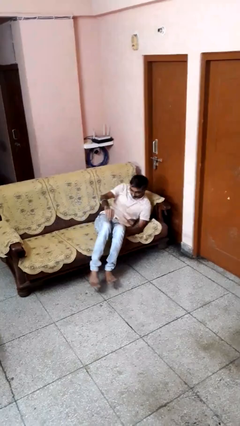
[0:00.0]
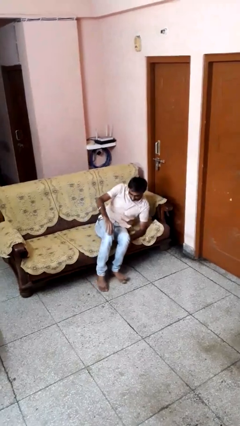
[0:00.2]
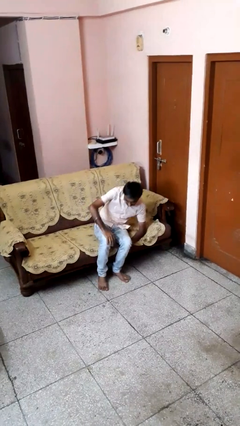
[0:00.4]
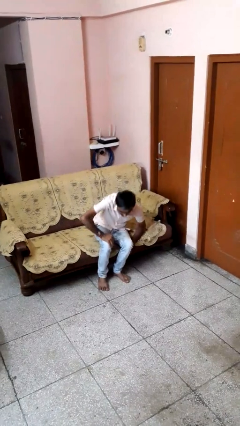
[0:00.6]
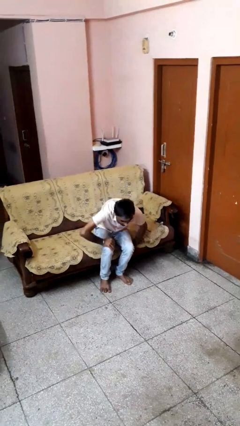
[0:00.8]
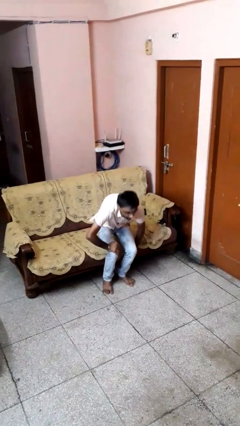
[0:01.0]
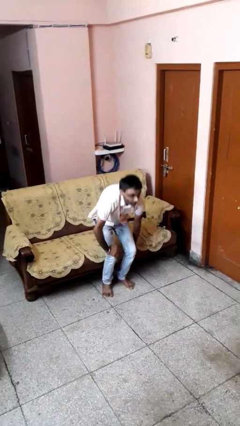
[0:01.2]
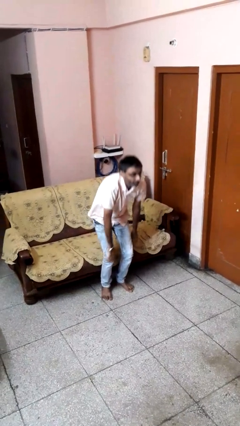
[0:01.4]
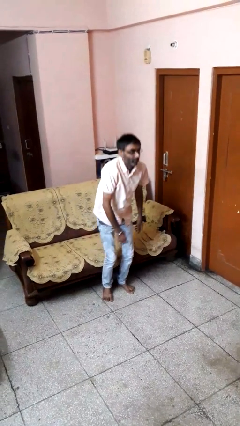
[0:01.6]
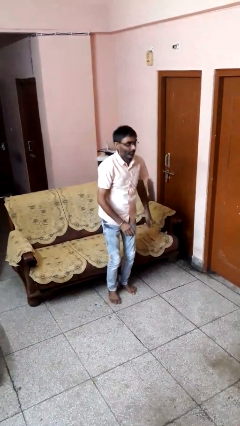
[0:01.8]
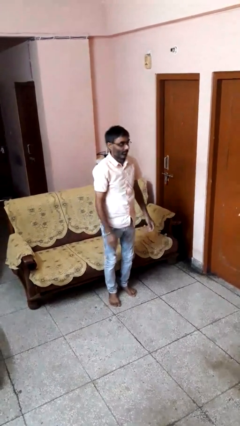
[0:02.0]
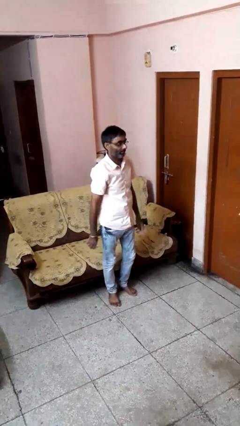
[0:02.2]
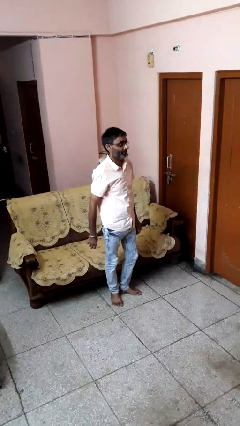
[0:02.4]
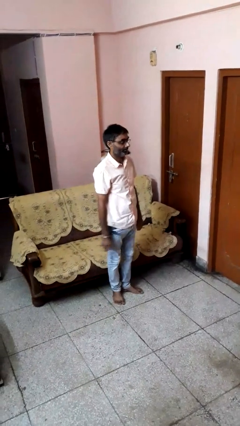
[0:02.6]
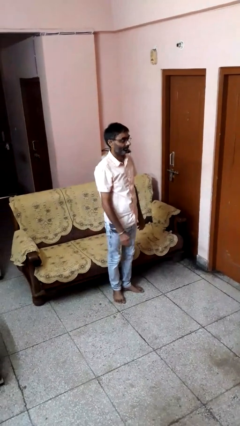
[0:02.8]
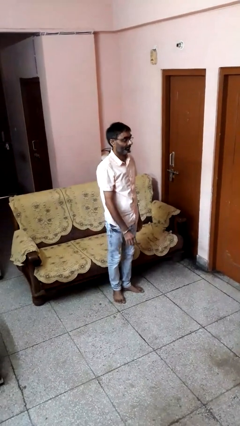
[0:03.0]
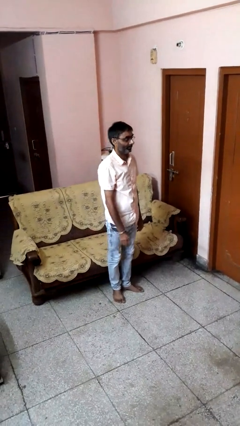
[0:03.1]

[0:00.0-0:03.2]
person stands up

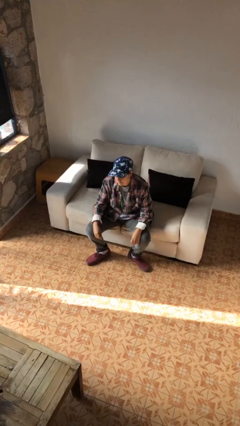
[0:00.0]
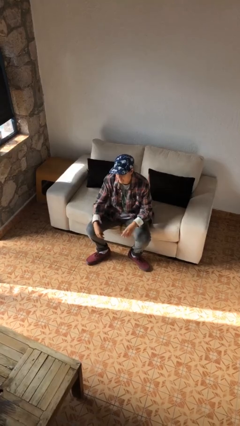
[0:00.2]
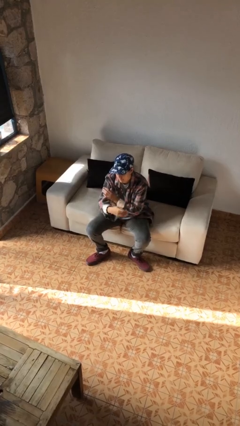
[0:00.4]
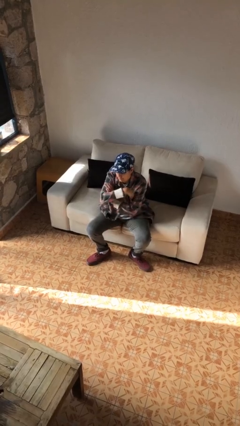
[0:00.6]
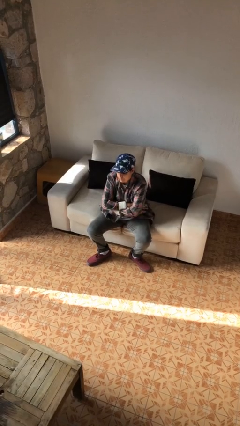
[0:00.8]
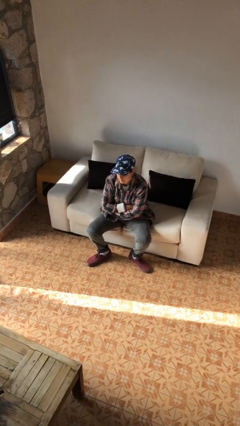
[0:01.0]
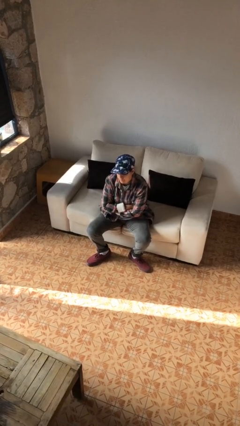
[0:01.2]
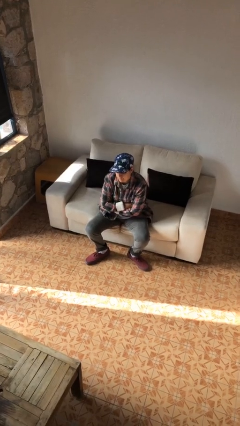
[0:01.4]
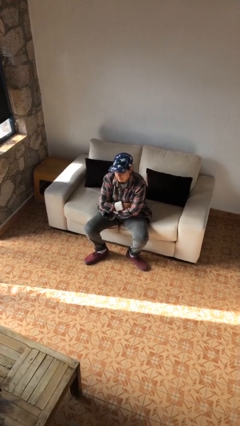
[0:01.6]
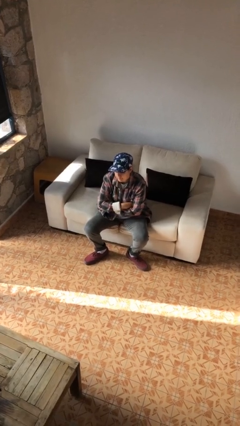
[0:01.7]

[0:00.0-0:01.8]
person crosses arms

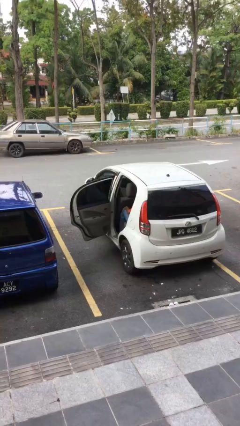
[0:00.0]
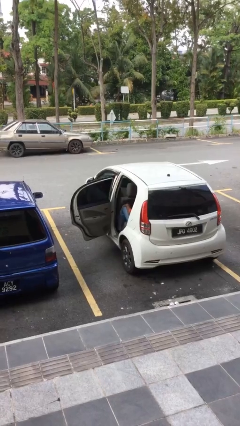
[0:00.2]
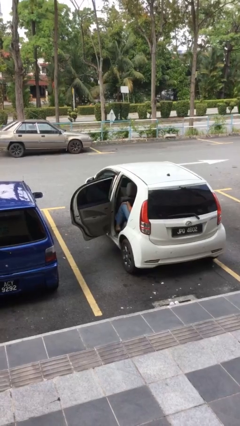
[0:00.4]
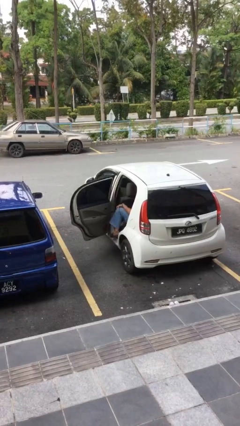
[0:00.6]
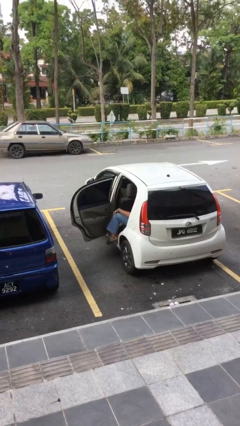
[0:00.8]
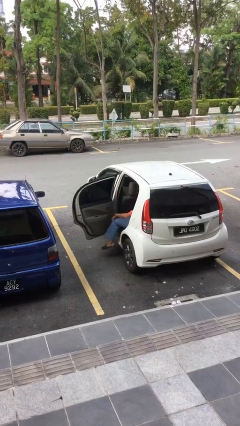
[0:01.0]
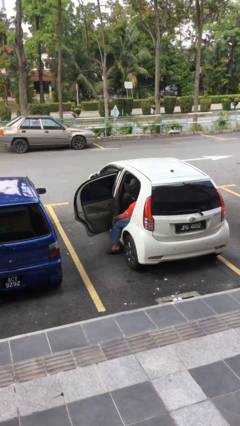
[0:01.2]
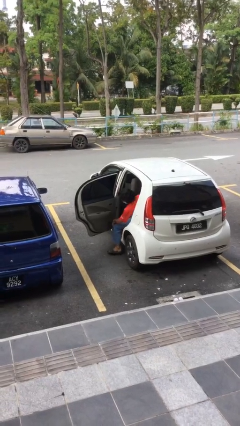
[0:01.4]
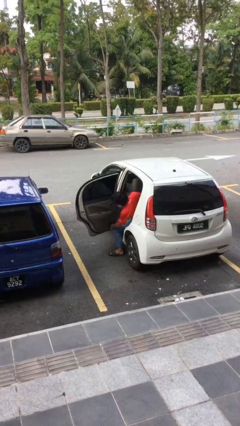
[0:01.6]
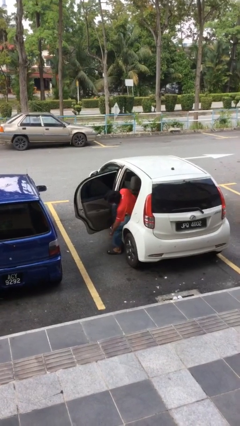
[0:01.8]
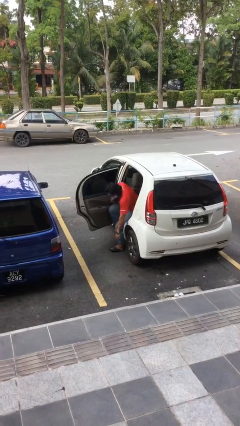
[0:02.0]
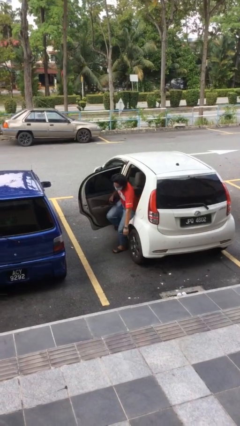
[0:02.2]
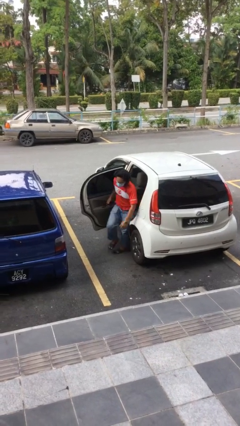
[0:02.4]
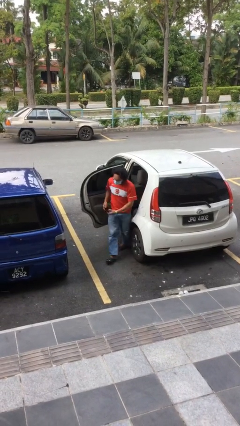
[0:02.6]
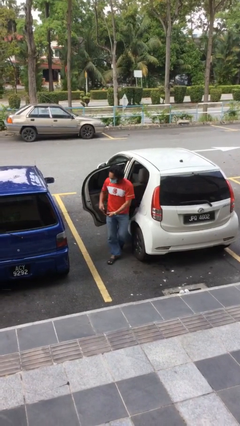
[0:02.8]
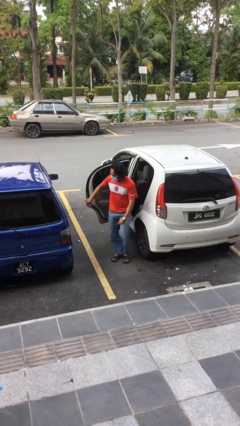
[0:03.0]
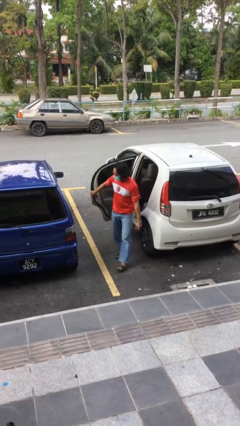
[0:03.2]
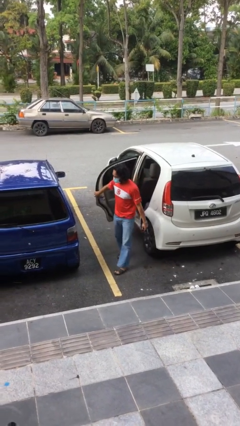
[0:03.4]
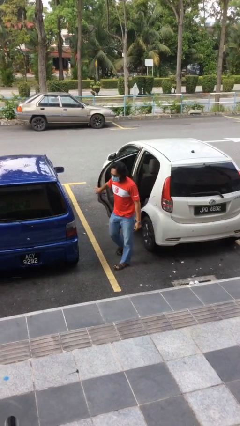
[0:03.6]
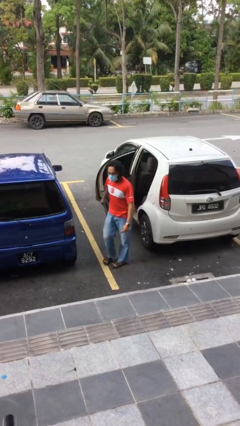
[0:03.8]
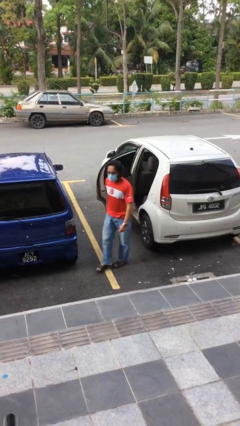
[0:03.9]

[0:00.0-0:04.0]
person exits car

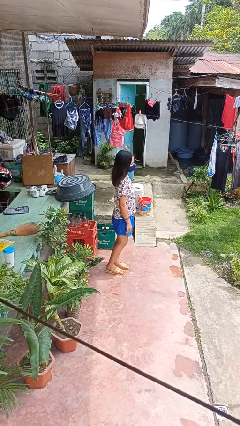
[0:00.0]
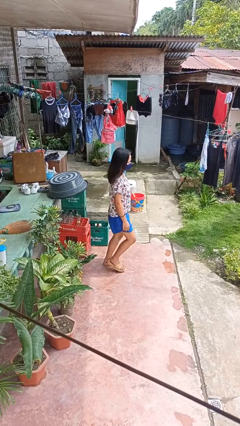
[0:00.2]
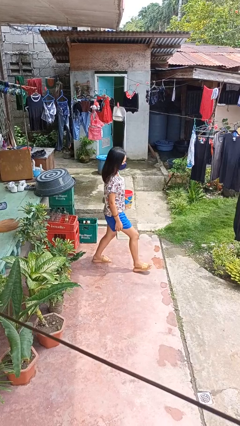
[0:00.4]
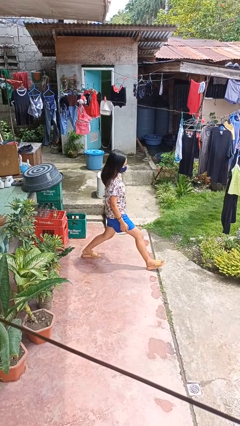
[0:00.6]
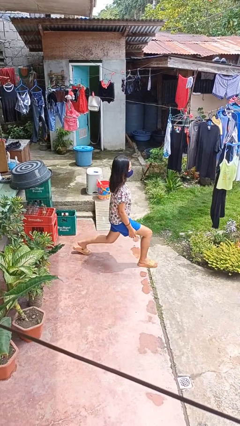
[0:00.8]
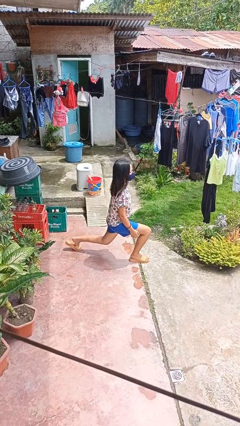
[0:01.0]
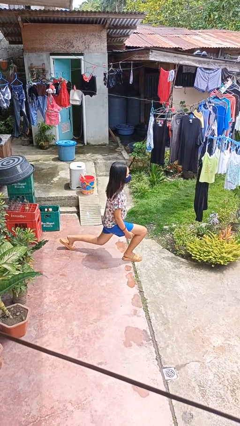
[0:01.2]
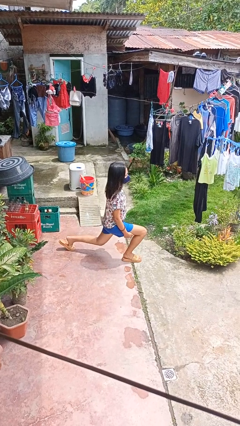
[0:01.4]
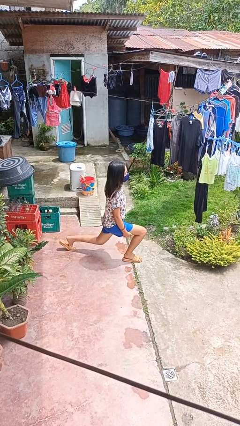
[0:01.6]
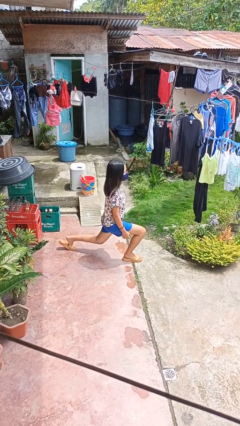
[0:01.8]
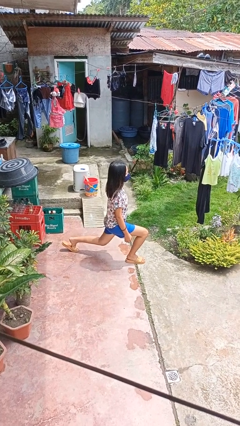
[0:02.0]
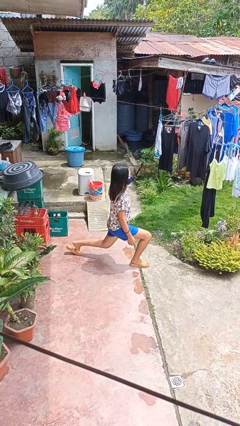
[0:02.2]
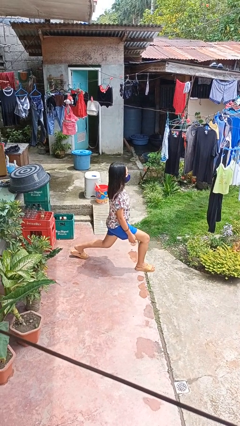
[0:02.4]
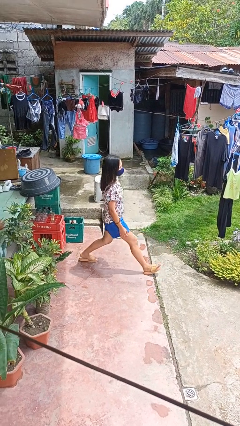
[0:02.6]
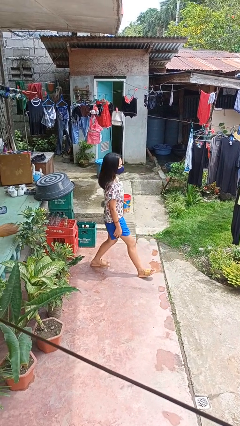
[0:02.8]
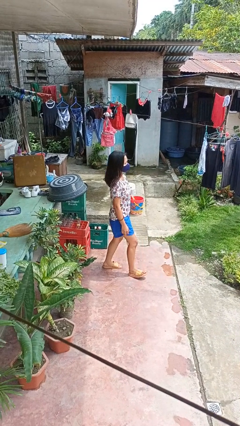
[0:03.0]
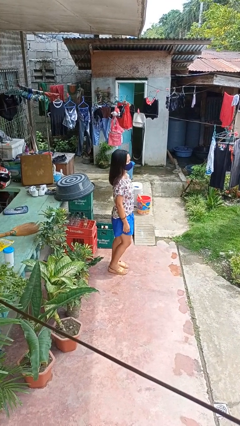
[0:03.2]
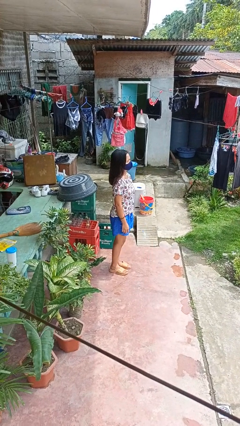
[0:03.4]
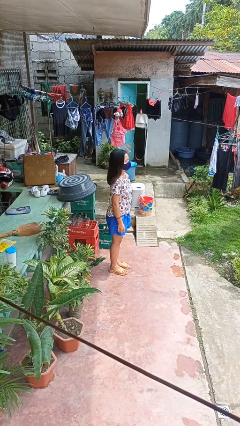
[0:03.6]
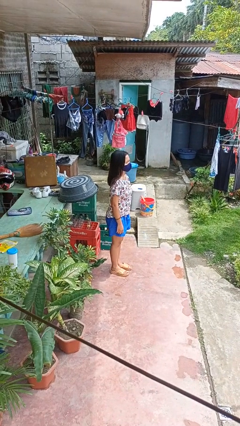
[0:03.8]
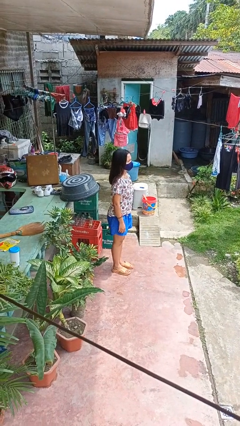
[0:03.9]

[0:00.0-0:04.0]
person exercises with lunges

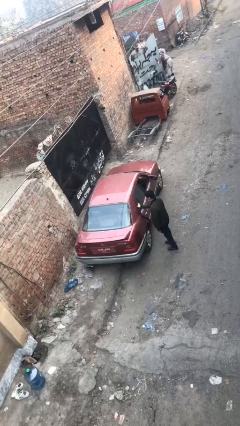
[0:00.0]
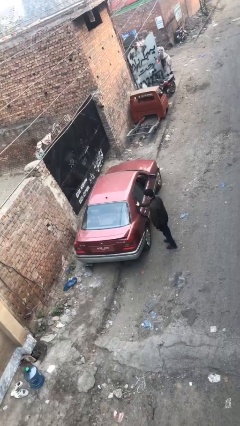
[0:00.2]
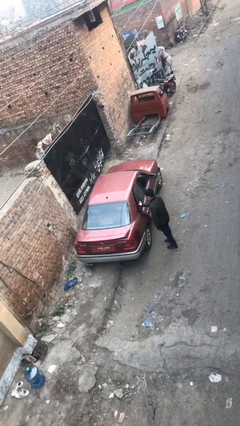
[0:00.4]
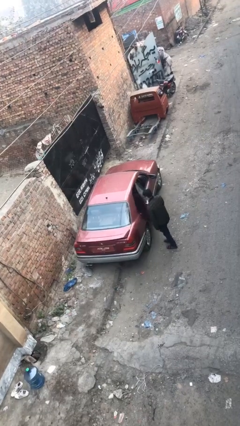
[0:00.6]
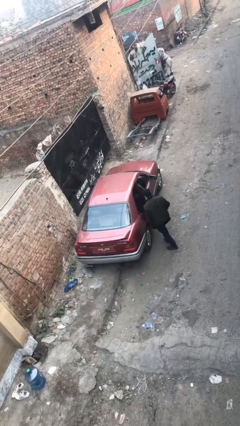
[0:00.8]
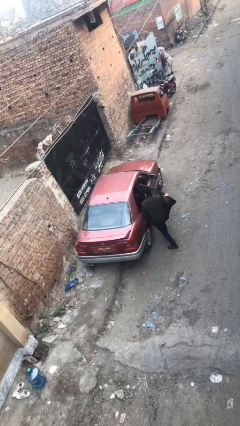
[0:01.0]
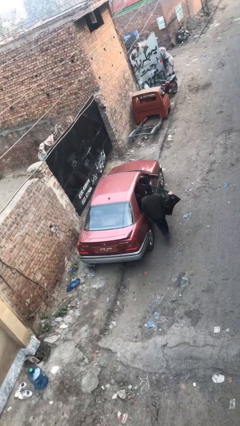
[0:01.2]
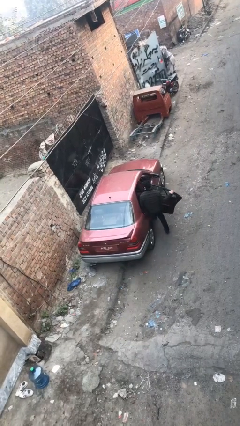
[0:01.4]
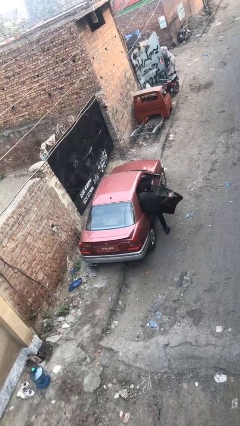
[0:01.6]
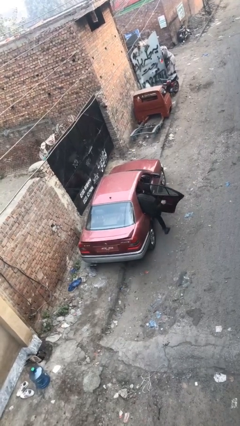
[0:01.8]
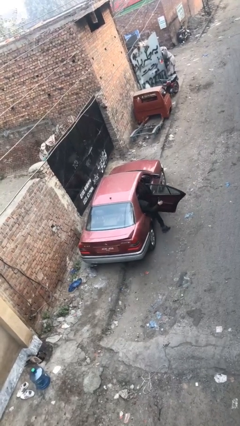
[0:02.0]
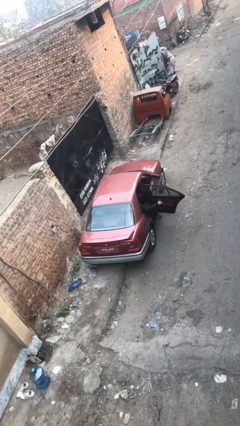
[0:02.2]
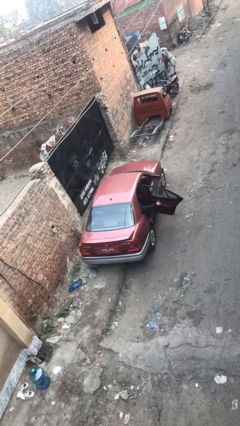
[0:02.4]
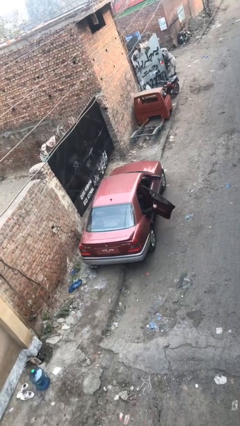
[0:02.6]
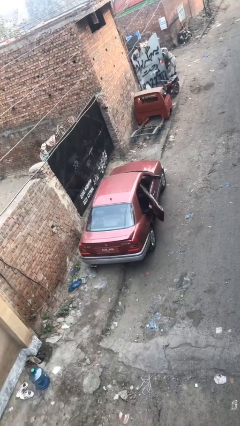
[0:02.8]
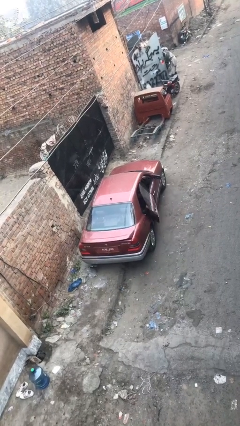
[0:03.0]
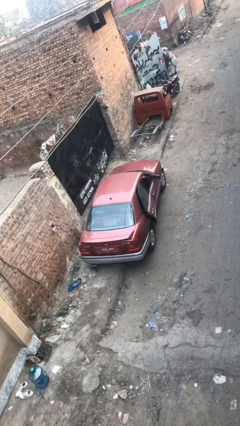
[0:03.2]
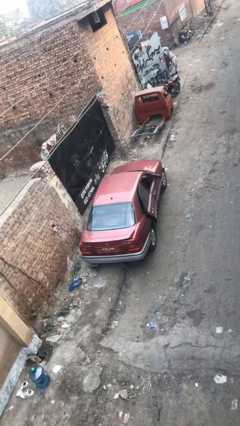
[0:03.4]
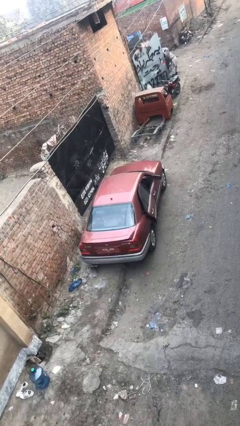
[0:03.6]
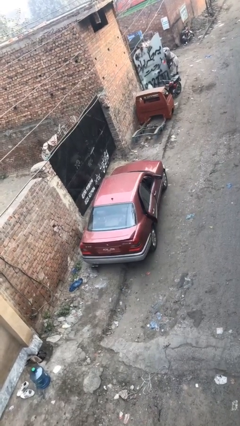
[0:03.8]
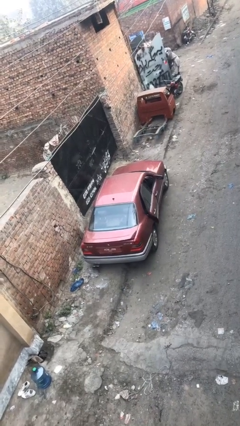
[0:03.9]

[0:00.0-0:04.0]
car picks up person

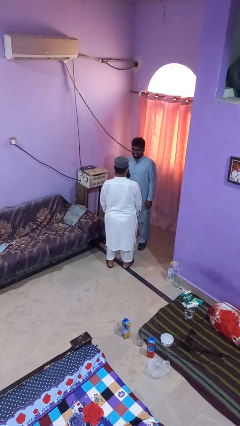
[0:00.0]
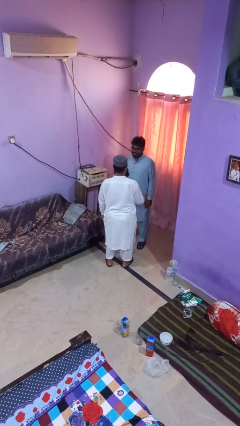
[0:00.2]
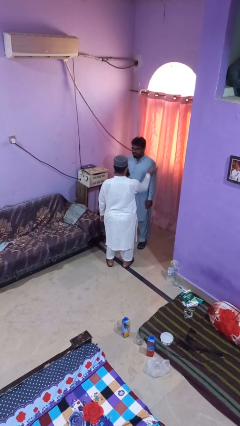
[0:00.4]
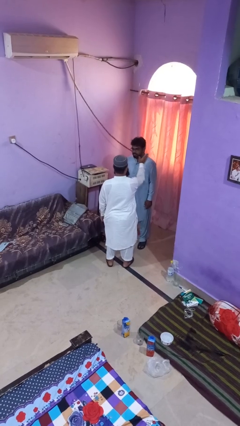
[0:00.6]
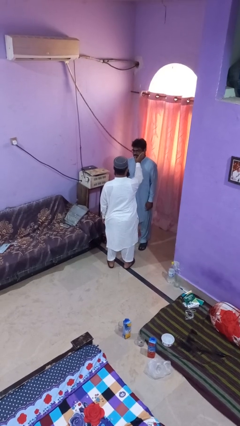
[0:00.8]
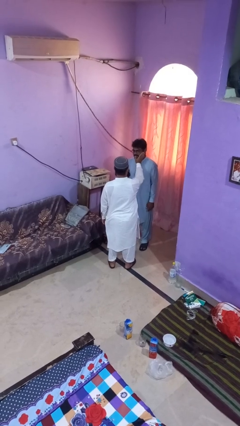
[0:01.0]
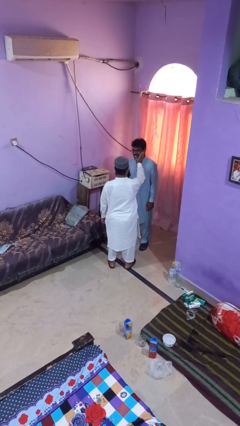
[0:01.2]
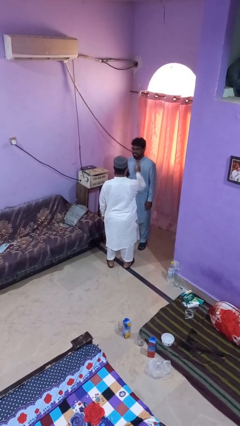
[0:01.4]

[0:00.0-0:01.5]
person touches face of person
